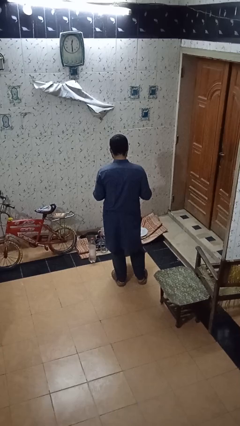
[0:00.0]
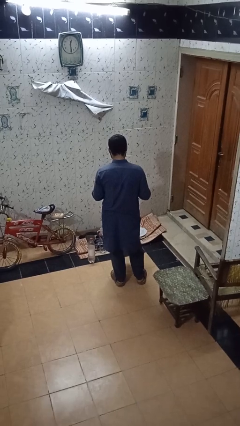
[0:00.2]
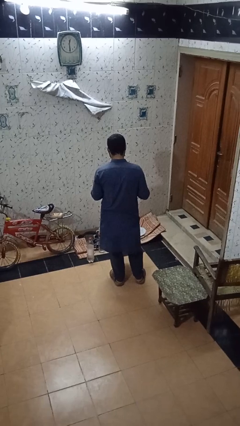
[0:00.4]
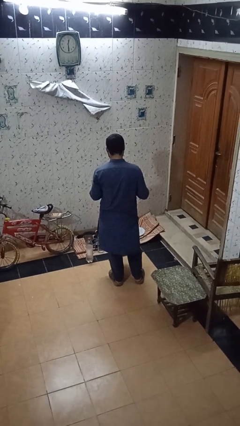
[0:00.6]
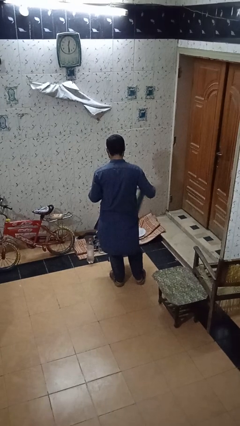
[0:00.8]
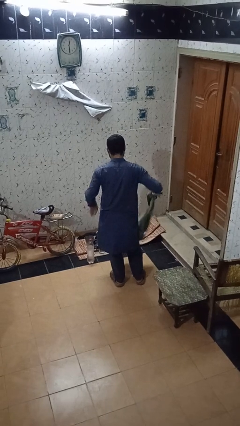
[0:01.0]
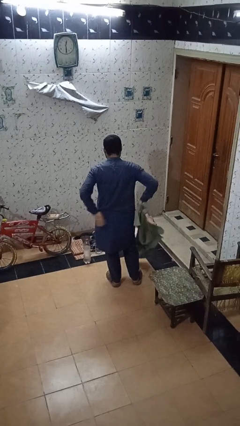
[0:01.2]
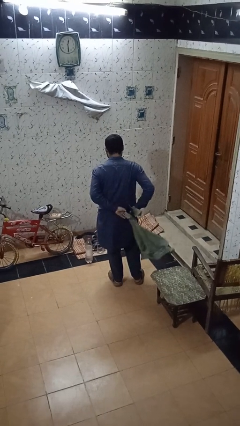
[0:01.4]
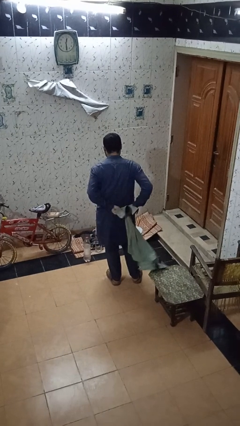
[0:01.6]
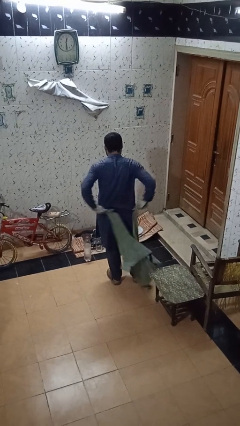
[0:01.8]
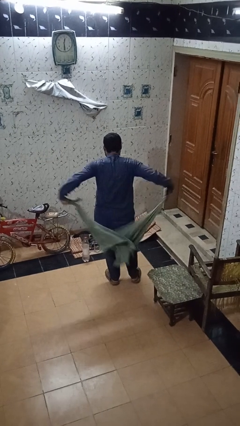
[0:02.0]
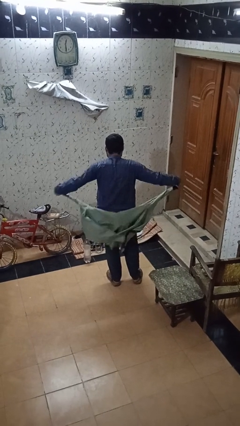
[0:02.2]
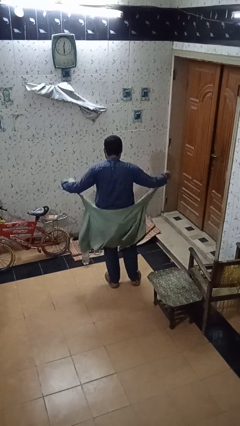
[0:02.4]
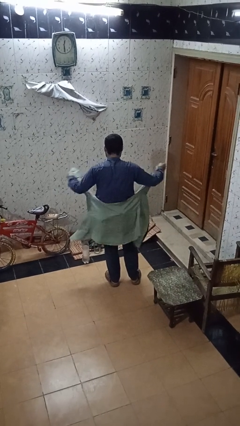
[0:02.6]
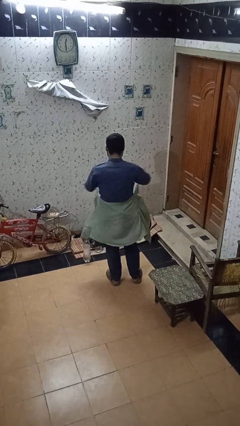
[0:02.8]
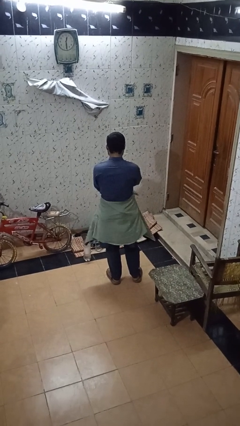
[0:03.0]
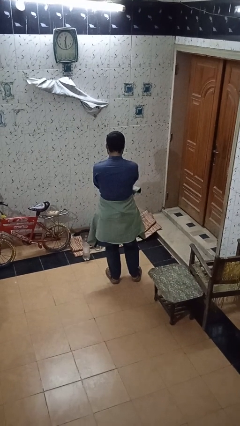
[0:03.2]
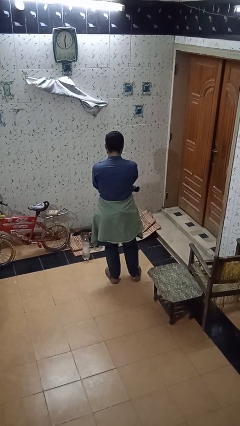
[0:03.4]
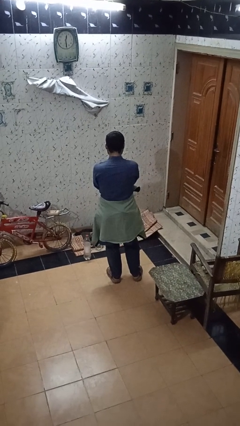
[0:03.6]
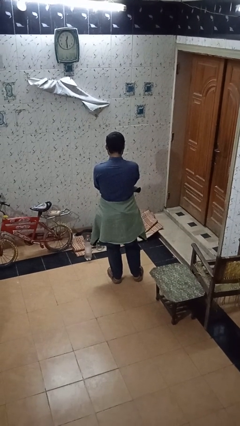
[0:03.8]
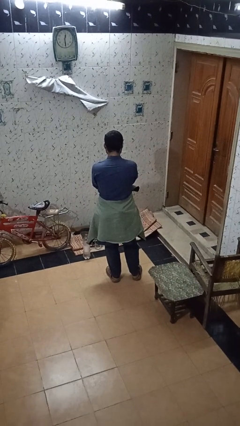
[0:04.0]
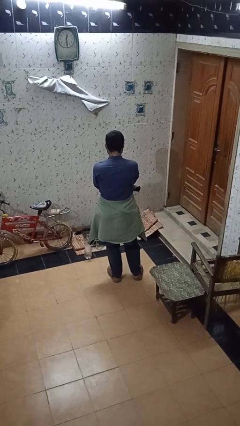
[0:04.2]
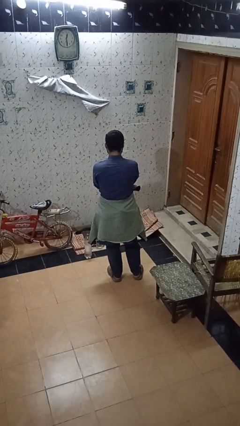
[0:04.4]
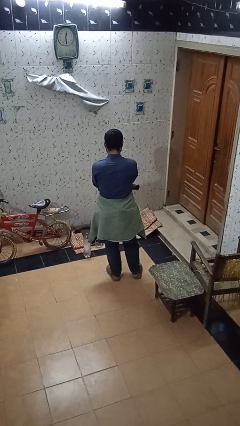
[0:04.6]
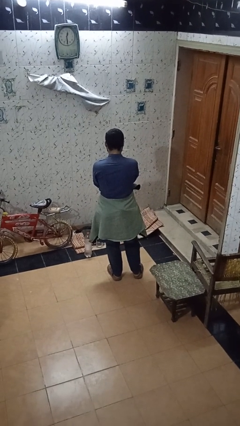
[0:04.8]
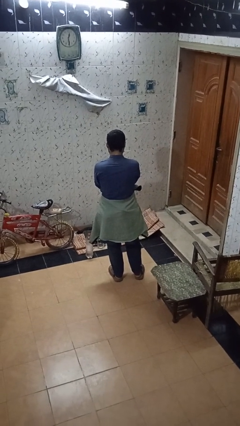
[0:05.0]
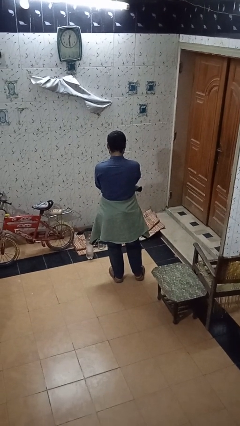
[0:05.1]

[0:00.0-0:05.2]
person ties jacket around waist

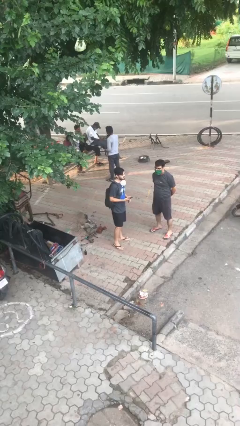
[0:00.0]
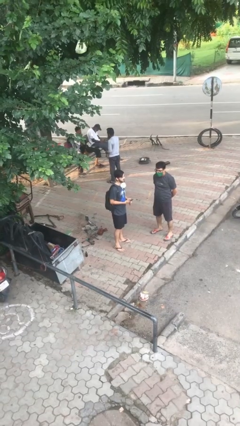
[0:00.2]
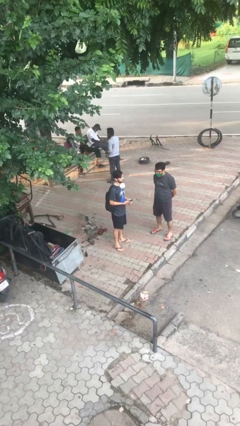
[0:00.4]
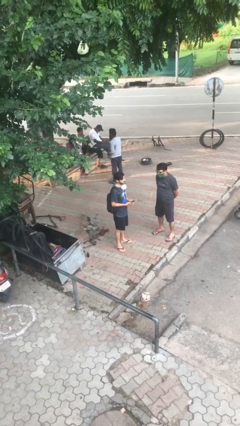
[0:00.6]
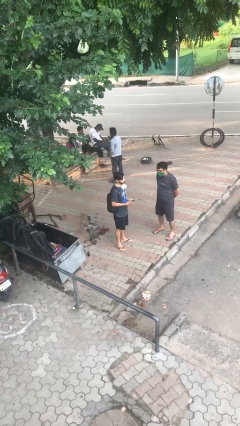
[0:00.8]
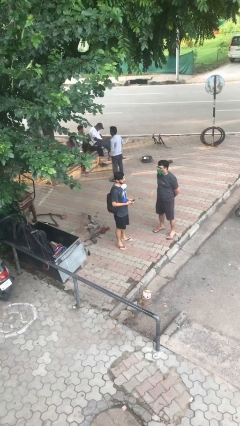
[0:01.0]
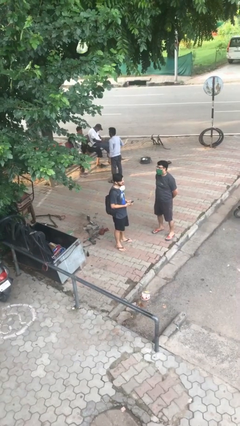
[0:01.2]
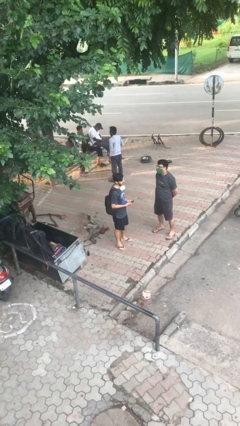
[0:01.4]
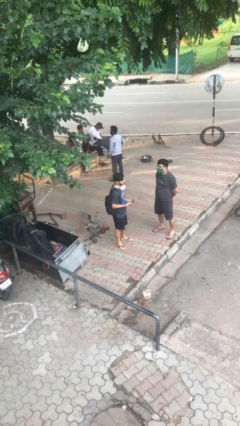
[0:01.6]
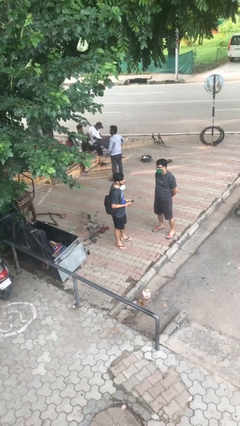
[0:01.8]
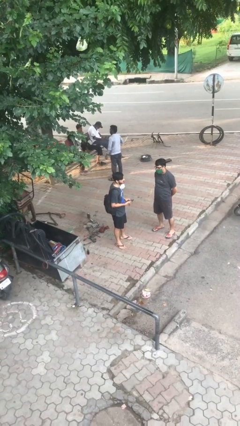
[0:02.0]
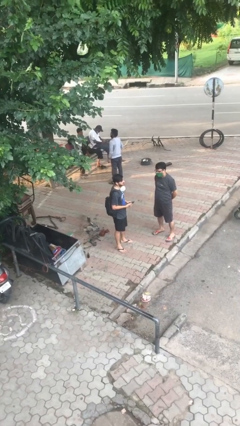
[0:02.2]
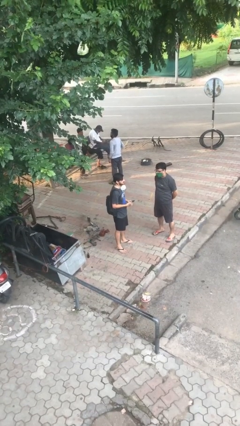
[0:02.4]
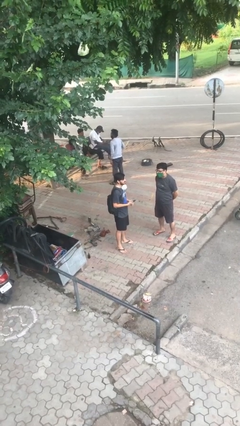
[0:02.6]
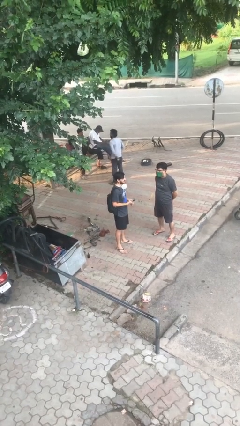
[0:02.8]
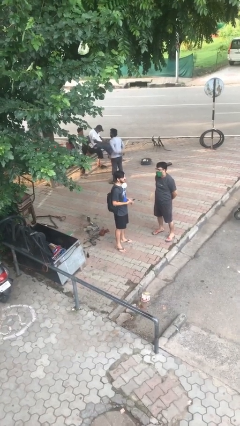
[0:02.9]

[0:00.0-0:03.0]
person talks to person

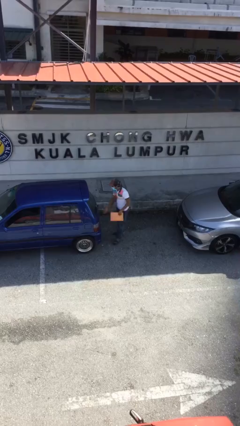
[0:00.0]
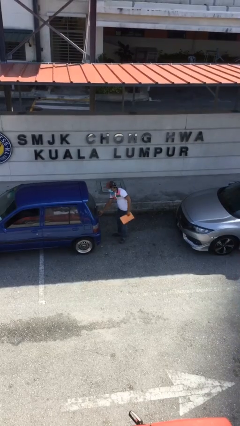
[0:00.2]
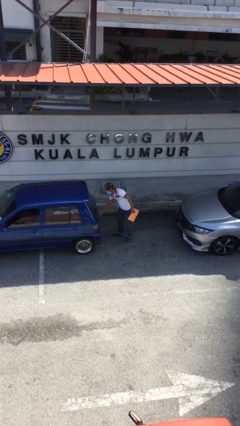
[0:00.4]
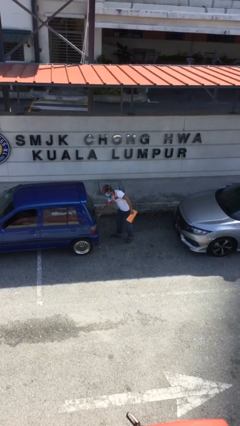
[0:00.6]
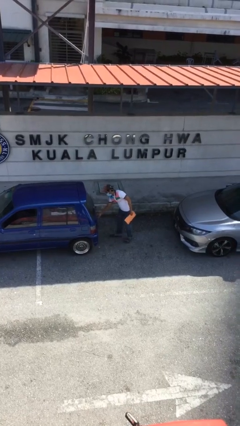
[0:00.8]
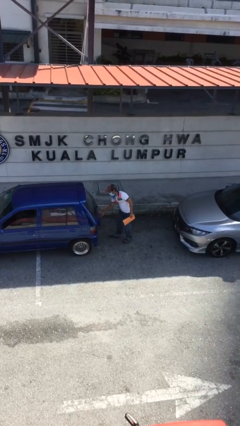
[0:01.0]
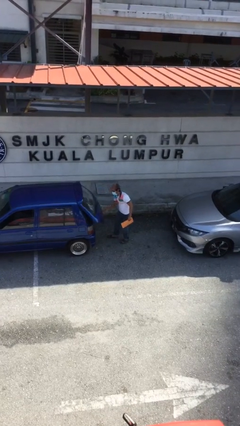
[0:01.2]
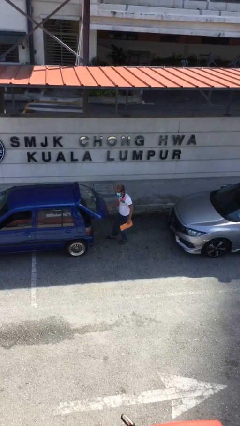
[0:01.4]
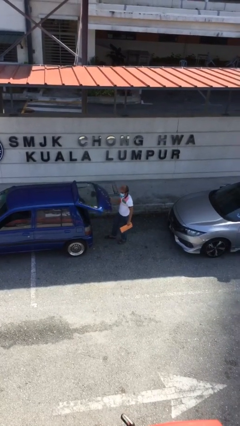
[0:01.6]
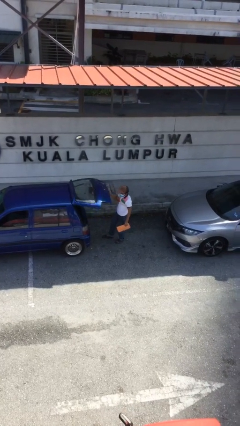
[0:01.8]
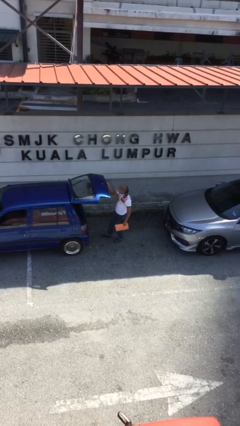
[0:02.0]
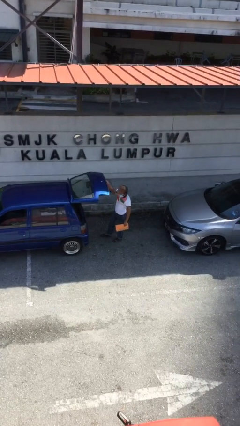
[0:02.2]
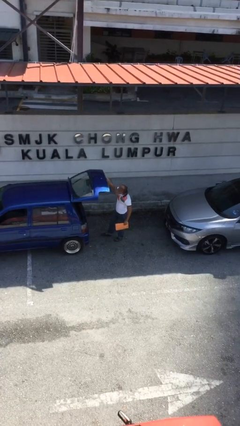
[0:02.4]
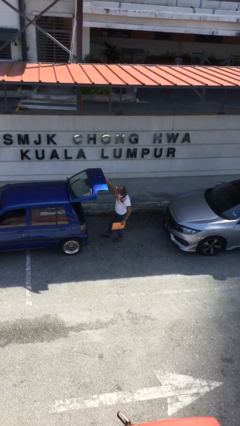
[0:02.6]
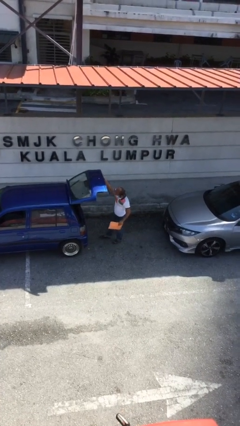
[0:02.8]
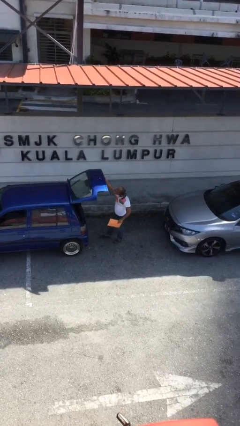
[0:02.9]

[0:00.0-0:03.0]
person opens car trunk

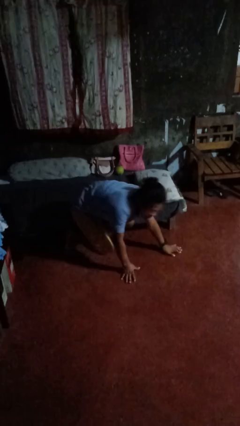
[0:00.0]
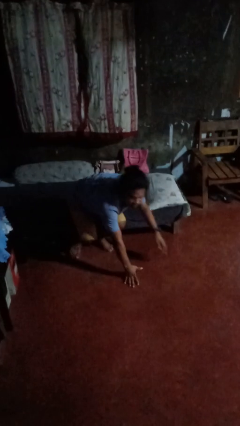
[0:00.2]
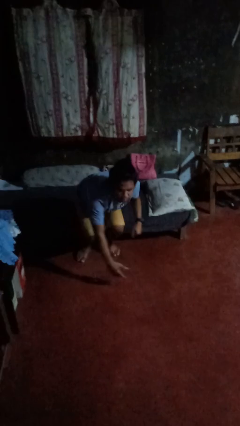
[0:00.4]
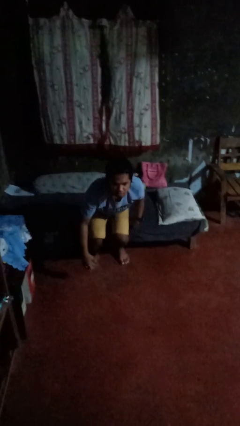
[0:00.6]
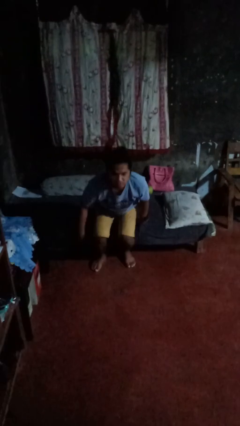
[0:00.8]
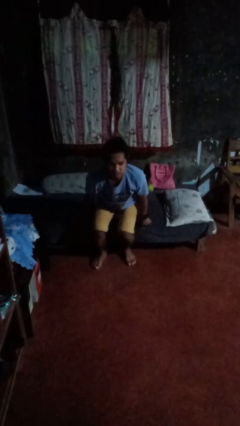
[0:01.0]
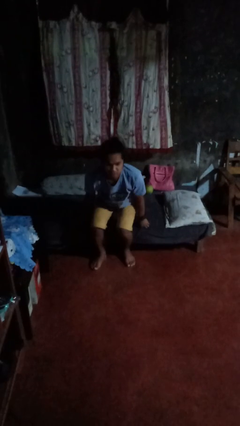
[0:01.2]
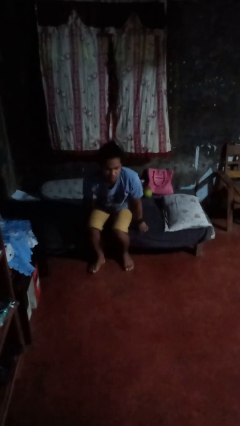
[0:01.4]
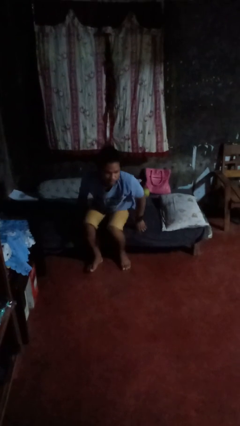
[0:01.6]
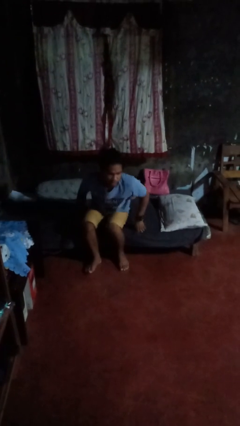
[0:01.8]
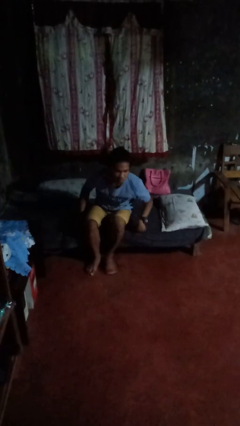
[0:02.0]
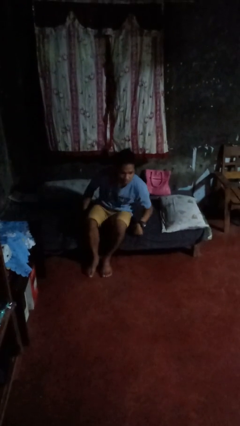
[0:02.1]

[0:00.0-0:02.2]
person stands up from floor

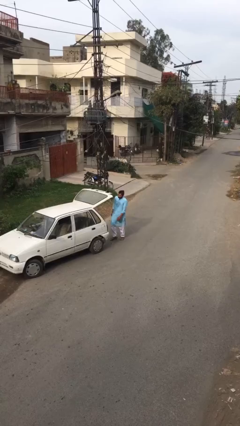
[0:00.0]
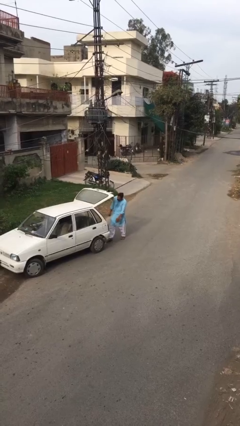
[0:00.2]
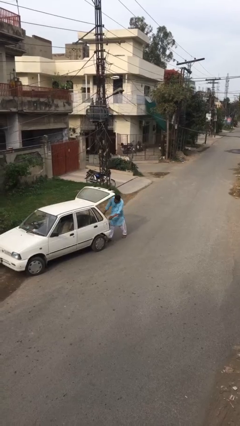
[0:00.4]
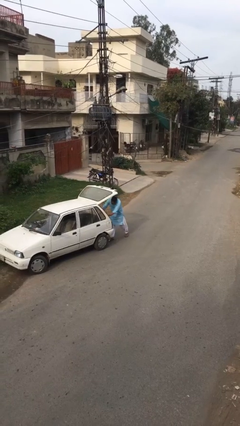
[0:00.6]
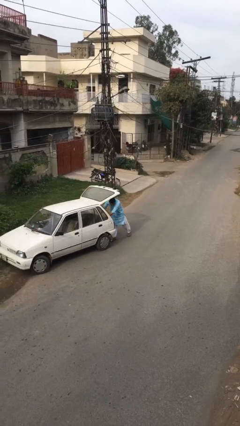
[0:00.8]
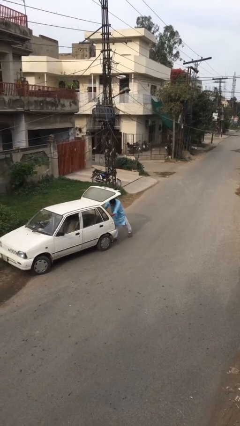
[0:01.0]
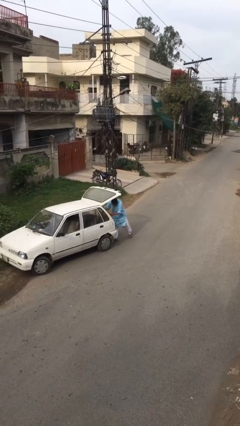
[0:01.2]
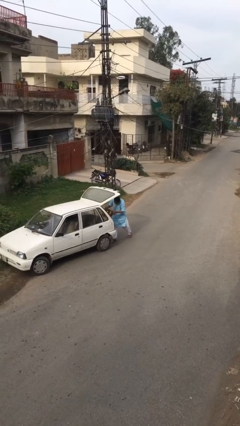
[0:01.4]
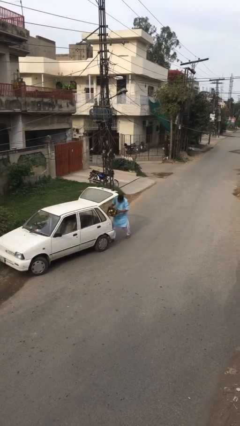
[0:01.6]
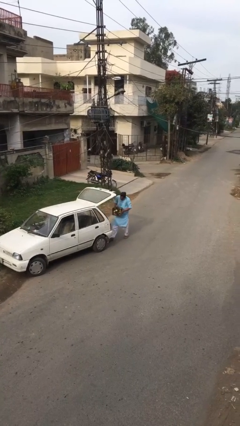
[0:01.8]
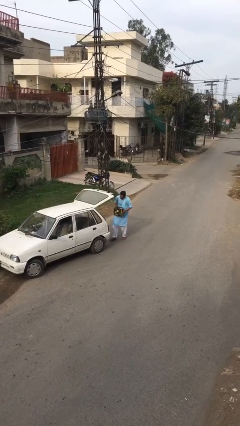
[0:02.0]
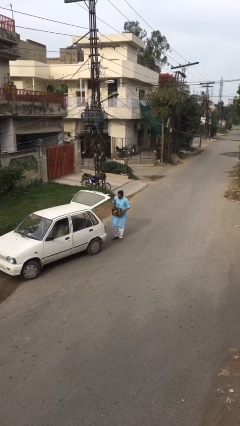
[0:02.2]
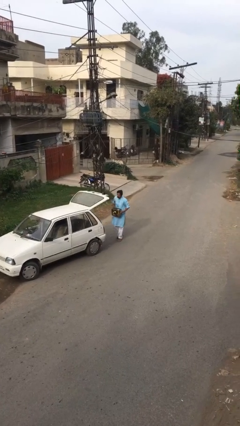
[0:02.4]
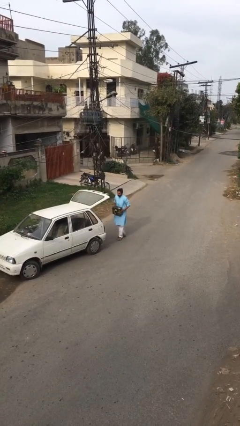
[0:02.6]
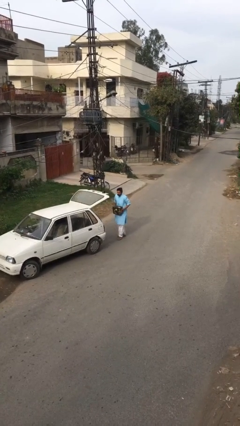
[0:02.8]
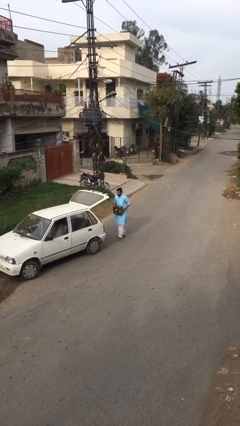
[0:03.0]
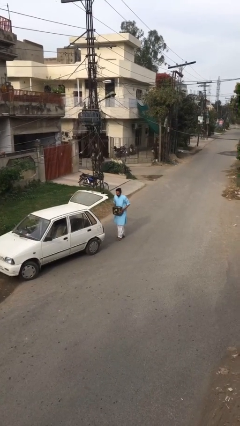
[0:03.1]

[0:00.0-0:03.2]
person unloads car

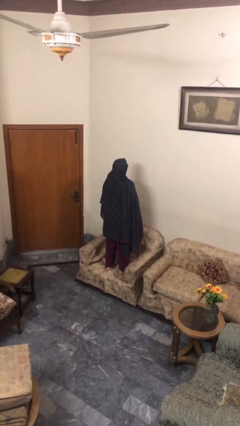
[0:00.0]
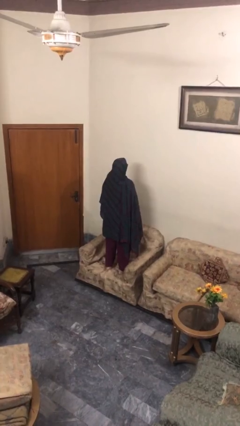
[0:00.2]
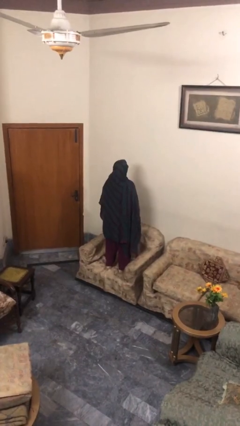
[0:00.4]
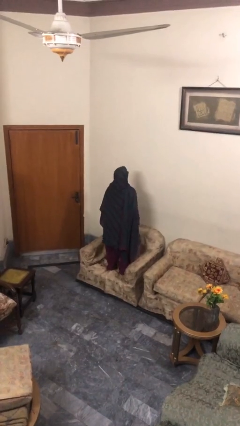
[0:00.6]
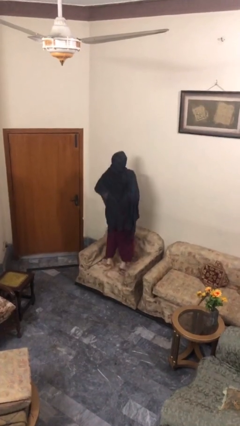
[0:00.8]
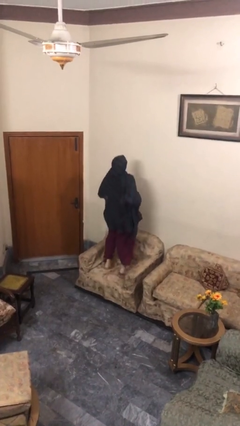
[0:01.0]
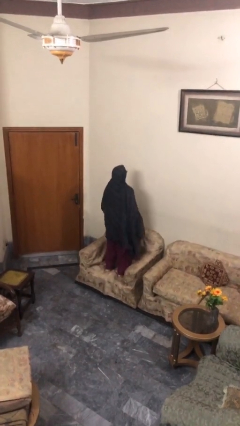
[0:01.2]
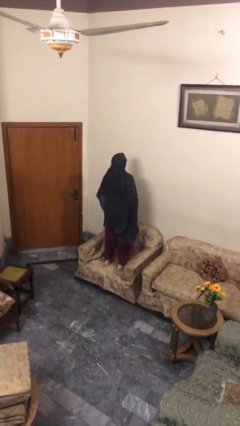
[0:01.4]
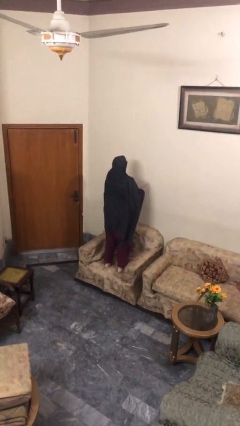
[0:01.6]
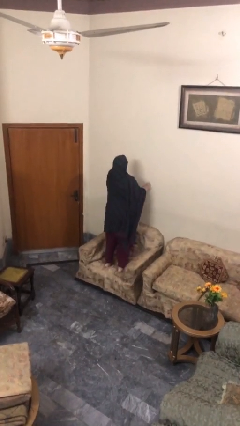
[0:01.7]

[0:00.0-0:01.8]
person jumps on couch
